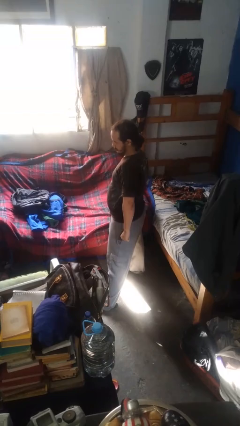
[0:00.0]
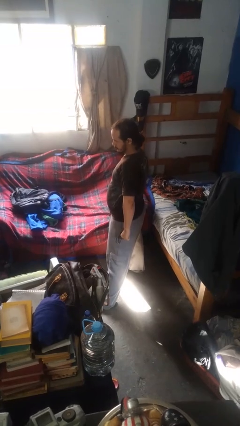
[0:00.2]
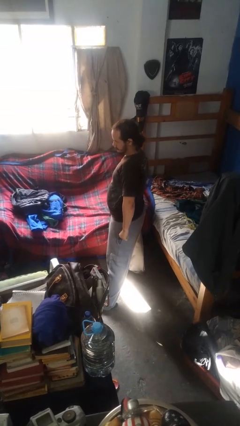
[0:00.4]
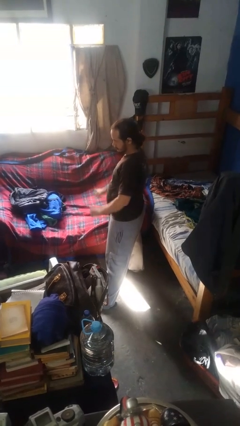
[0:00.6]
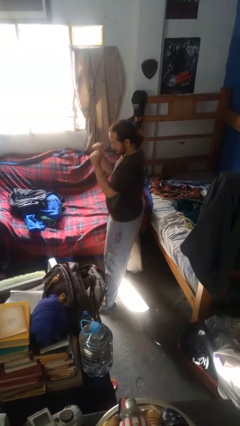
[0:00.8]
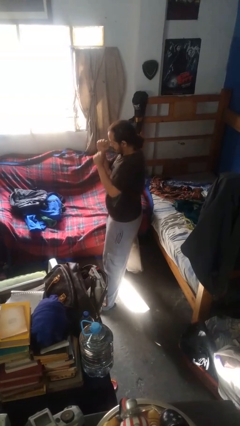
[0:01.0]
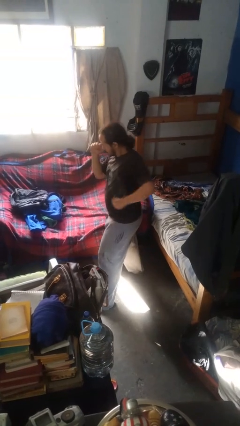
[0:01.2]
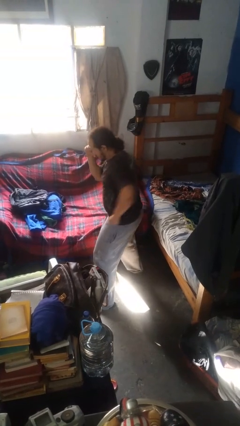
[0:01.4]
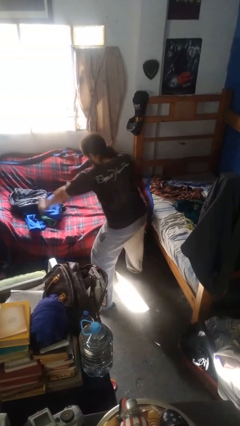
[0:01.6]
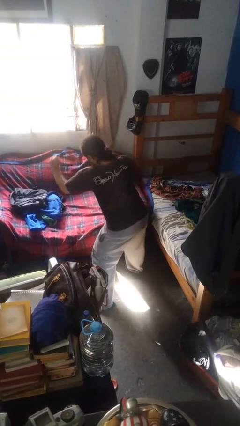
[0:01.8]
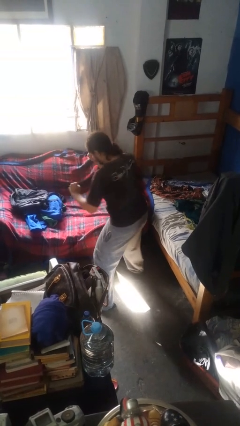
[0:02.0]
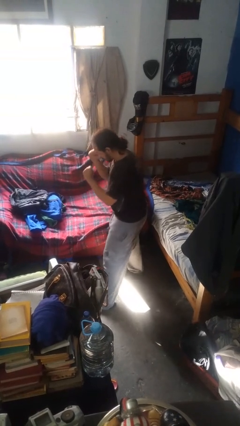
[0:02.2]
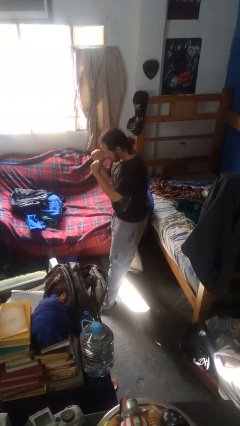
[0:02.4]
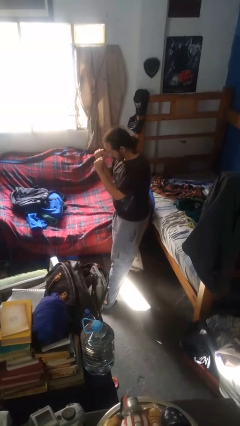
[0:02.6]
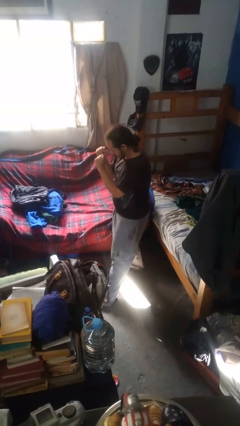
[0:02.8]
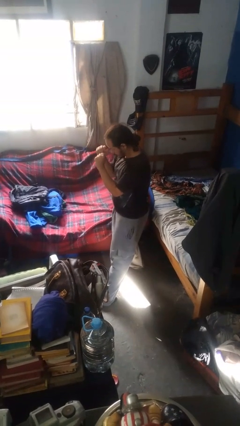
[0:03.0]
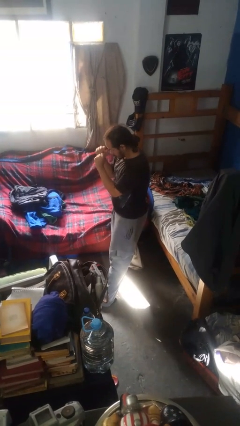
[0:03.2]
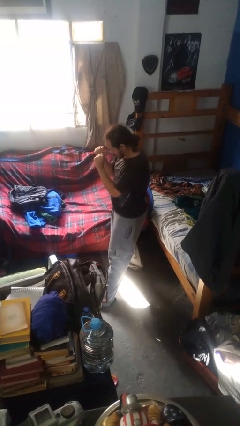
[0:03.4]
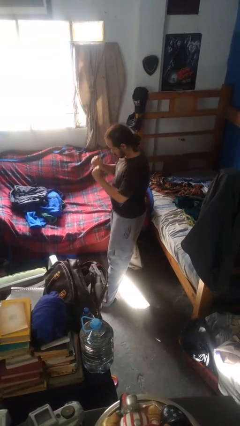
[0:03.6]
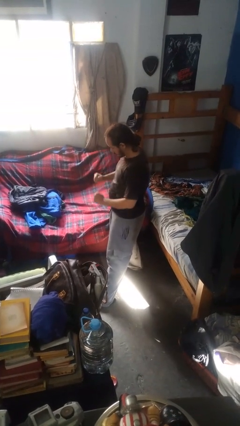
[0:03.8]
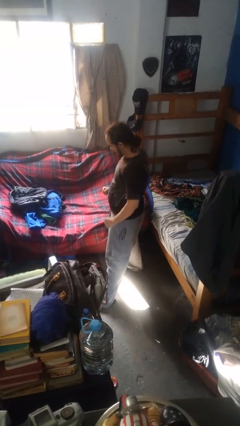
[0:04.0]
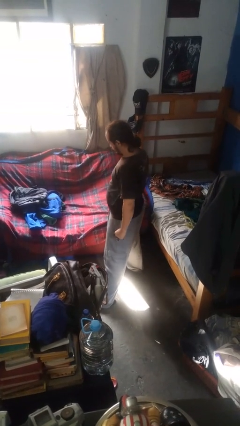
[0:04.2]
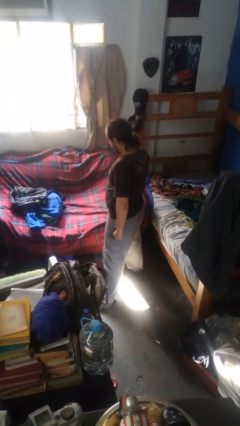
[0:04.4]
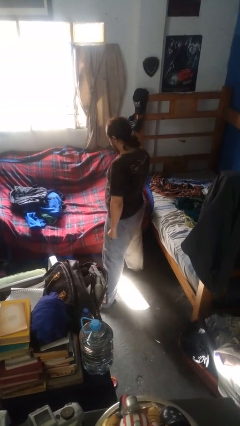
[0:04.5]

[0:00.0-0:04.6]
person punches

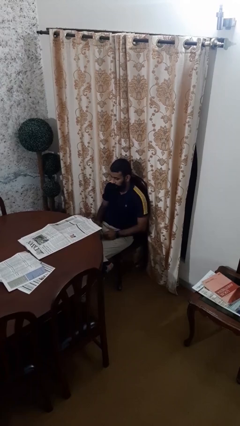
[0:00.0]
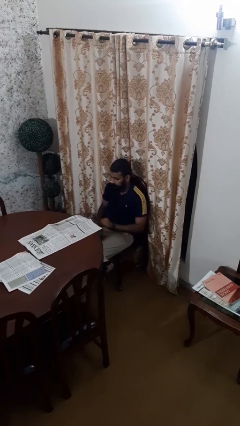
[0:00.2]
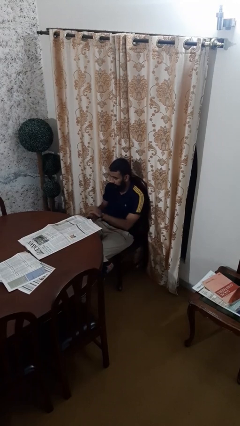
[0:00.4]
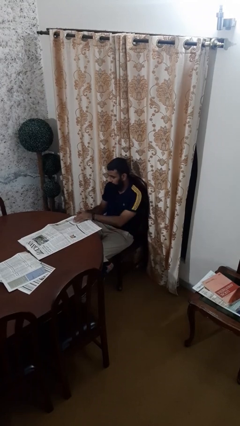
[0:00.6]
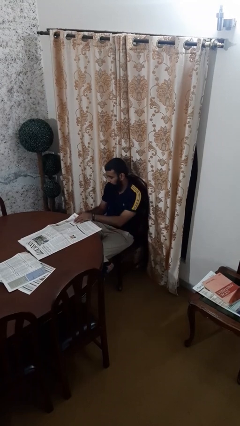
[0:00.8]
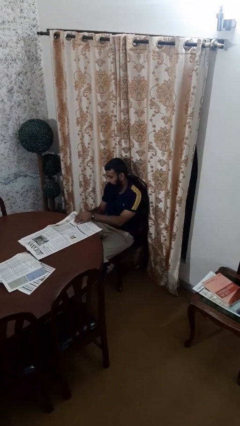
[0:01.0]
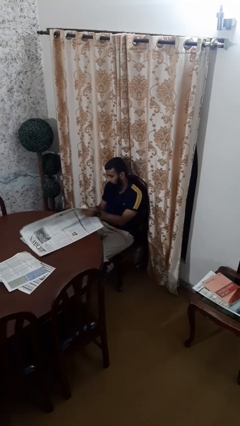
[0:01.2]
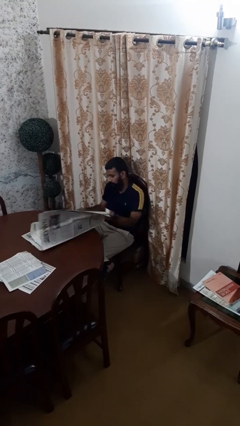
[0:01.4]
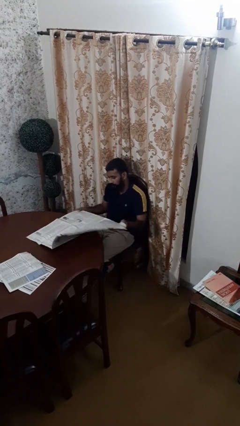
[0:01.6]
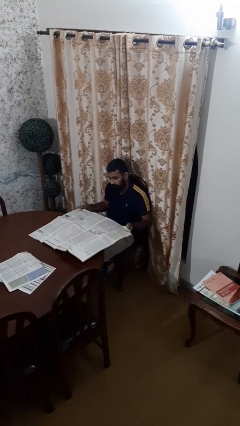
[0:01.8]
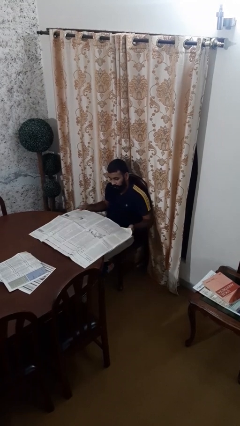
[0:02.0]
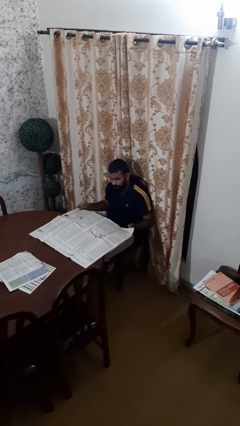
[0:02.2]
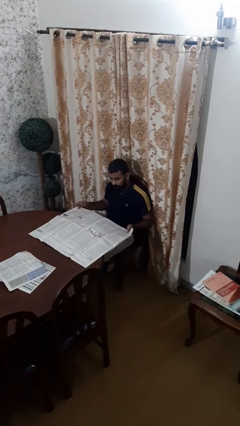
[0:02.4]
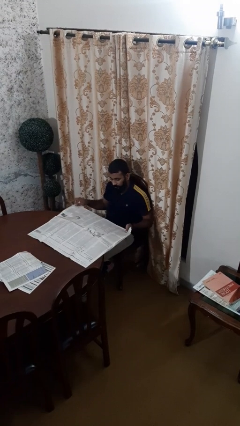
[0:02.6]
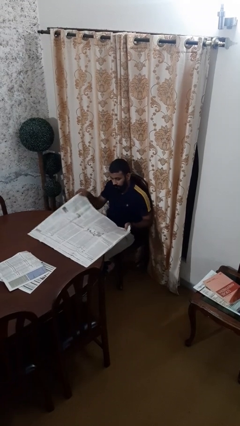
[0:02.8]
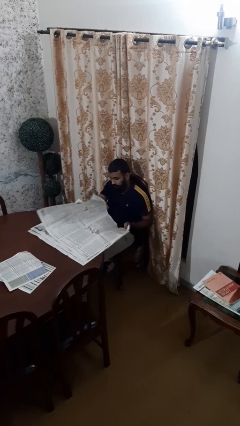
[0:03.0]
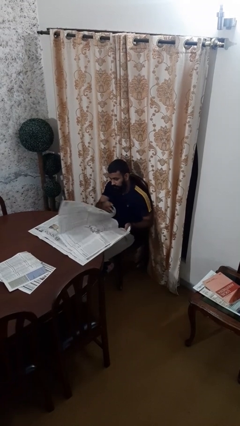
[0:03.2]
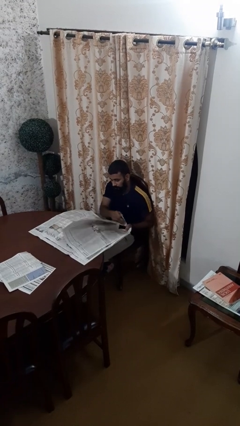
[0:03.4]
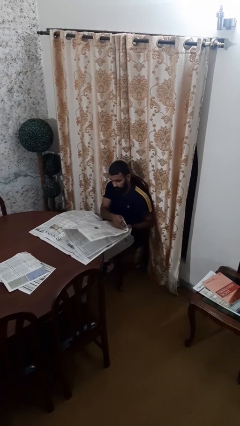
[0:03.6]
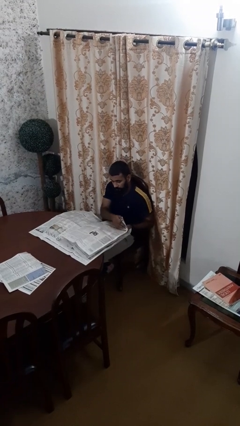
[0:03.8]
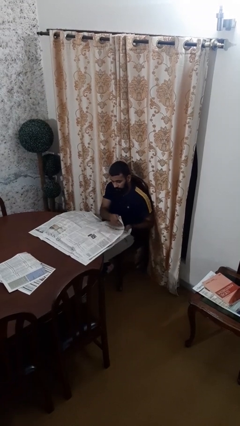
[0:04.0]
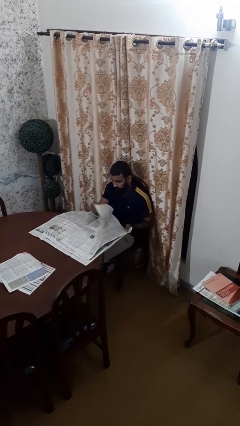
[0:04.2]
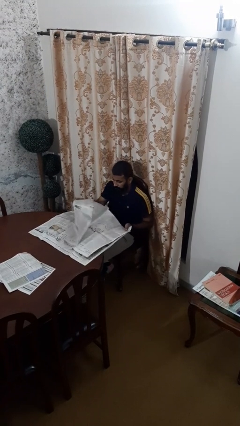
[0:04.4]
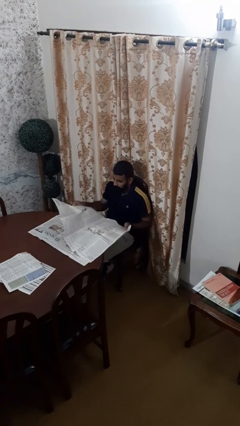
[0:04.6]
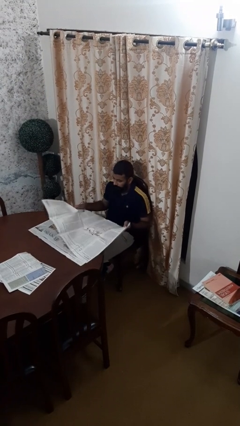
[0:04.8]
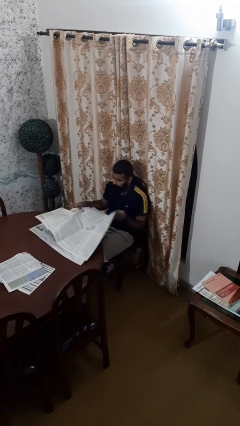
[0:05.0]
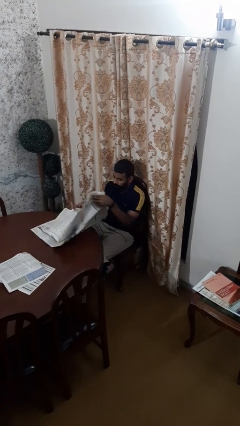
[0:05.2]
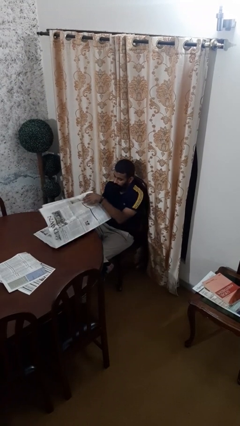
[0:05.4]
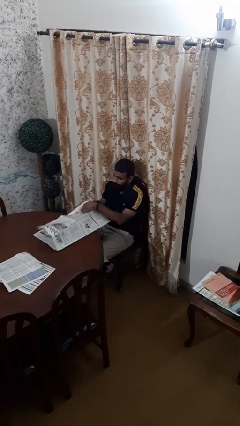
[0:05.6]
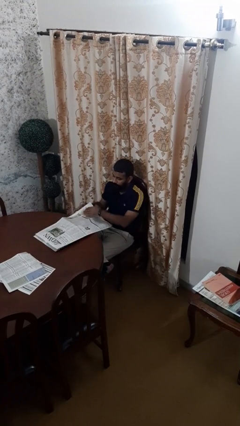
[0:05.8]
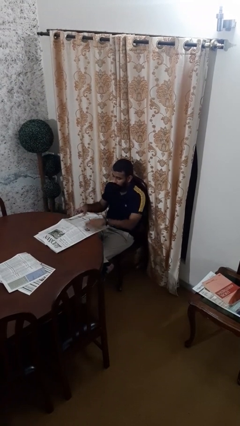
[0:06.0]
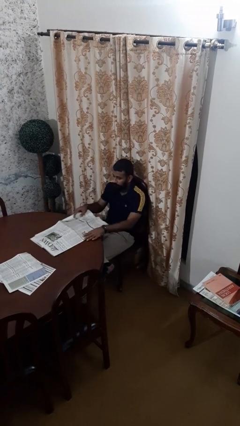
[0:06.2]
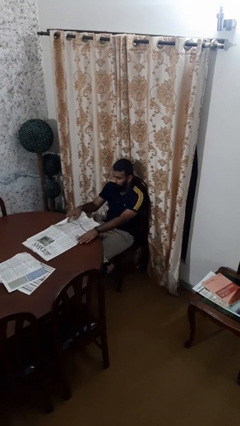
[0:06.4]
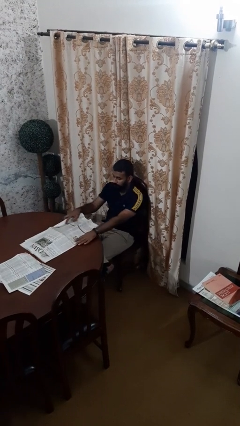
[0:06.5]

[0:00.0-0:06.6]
person reads newspaper

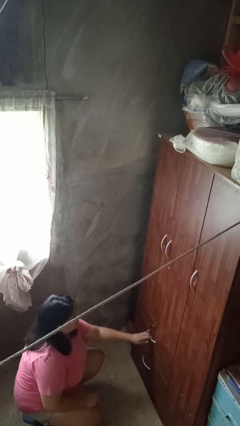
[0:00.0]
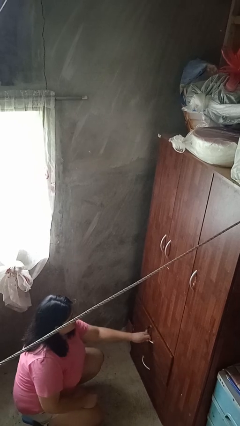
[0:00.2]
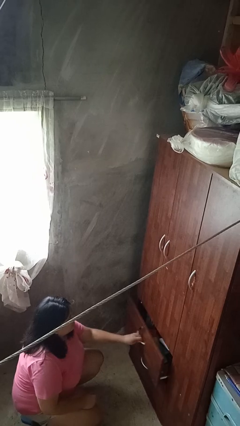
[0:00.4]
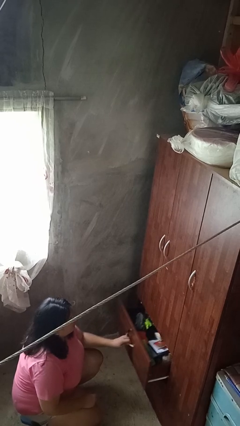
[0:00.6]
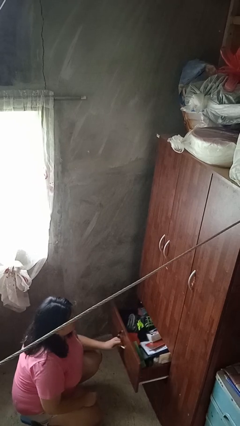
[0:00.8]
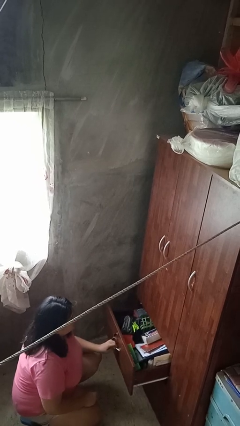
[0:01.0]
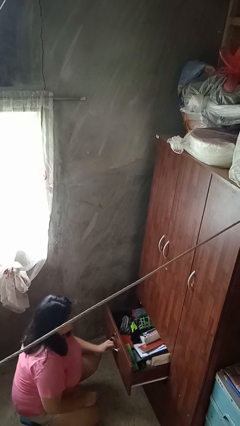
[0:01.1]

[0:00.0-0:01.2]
person opens dresser drawer

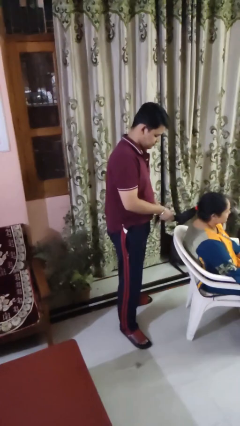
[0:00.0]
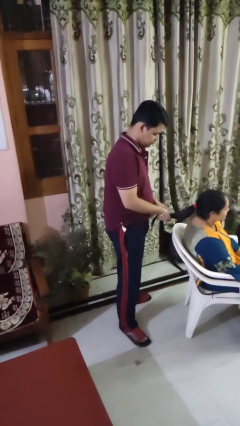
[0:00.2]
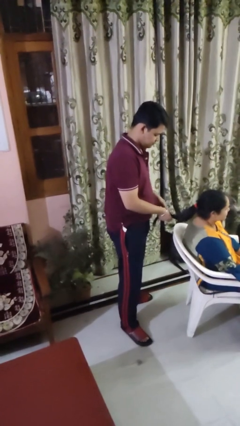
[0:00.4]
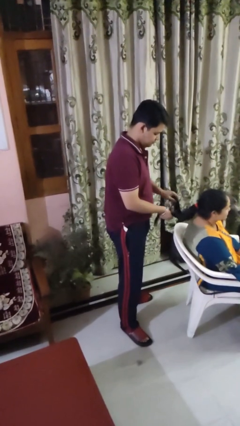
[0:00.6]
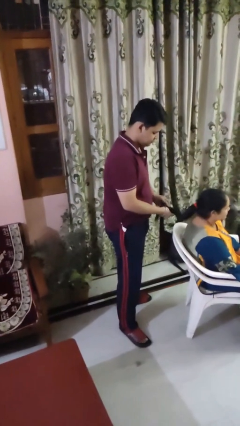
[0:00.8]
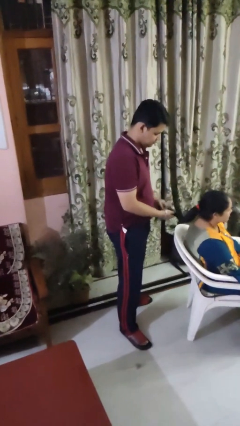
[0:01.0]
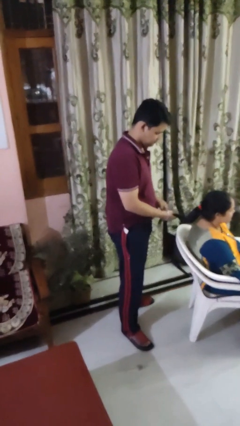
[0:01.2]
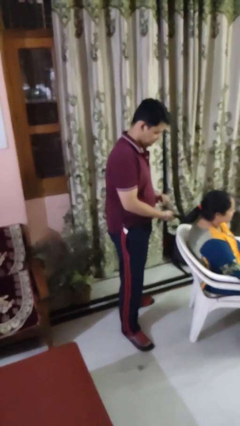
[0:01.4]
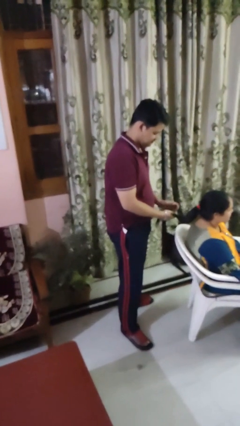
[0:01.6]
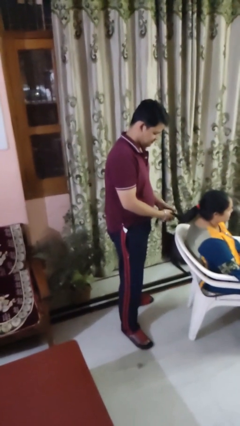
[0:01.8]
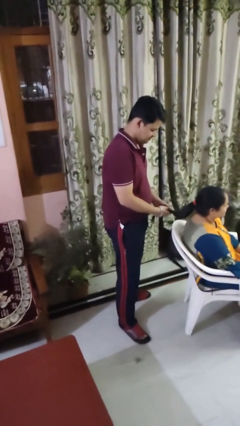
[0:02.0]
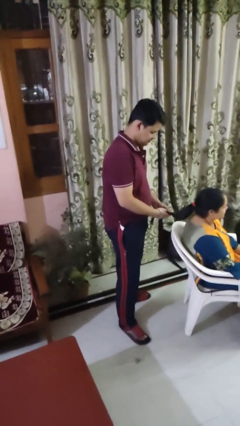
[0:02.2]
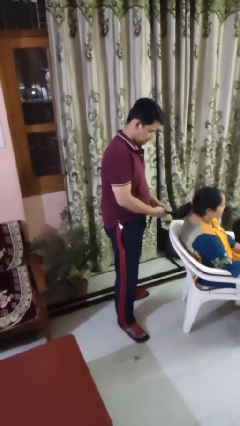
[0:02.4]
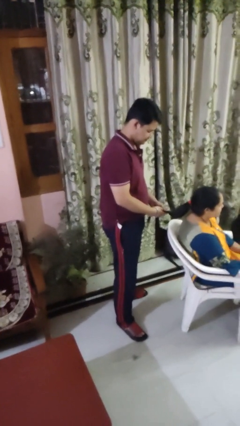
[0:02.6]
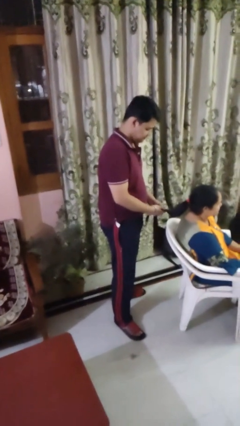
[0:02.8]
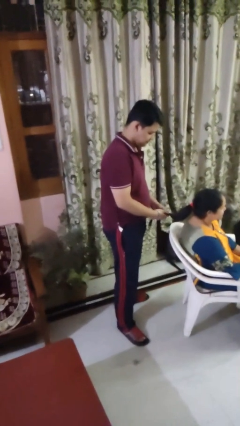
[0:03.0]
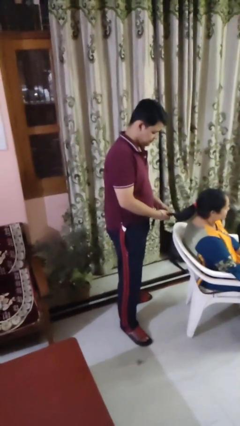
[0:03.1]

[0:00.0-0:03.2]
person braids hair of person

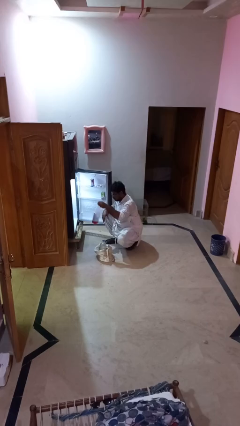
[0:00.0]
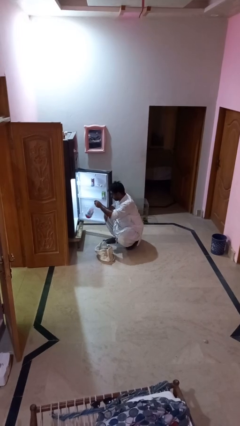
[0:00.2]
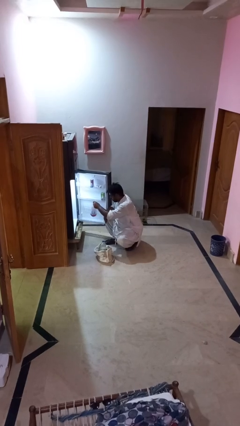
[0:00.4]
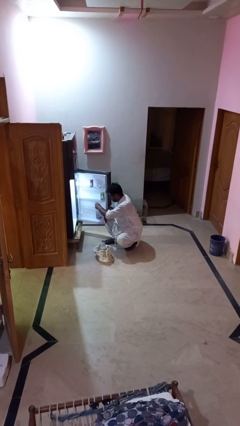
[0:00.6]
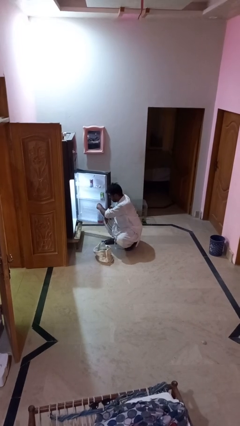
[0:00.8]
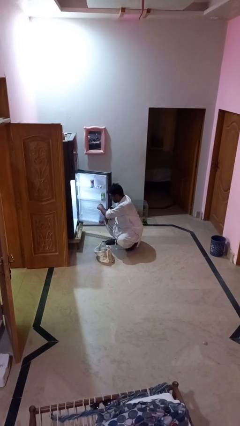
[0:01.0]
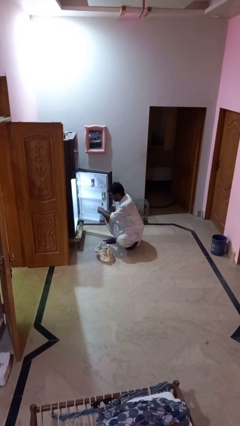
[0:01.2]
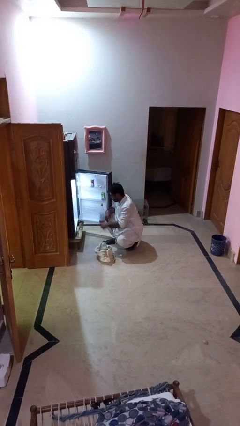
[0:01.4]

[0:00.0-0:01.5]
person loads groceries into refrigerator

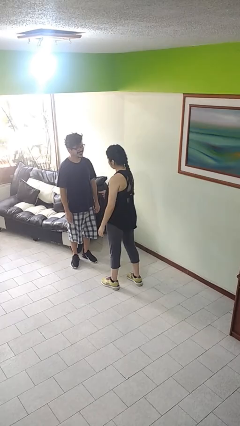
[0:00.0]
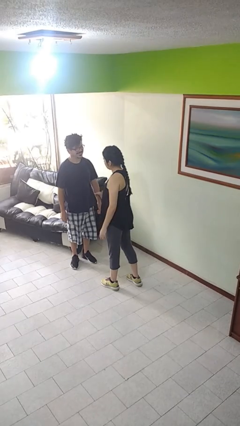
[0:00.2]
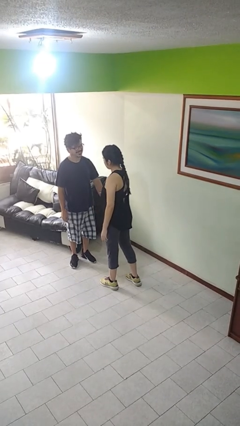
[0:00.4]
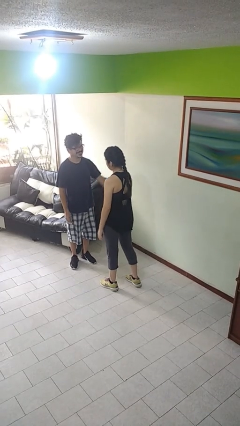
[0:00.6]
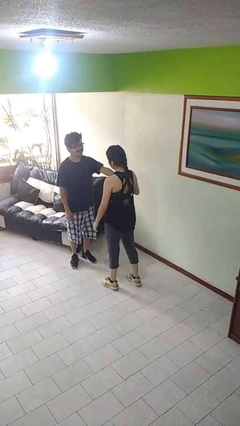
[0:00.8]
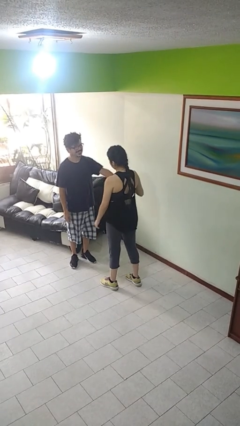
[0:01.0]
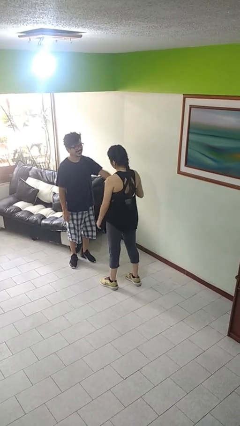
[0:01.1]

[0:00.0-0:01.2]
person grabs person by forearm
